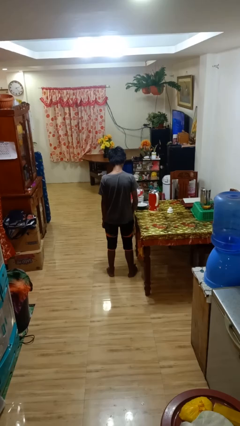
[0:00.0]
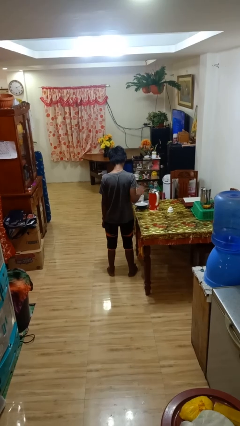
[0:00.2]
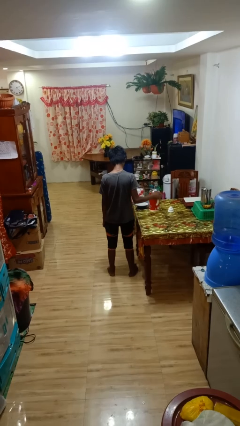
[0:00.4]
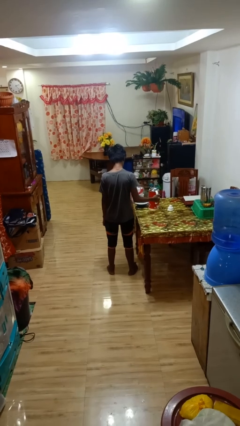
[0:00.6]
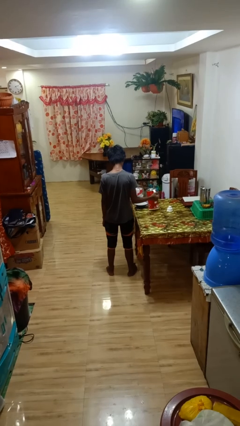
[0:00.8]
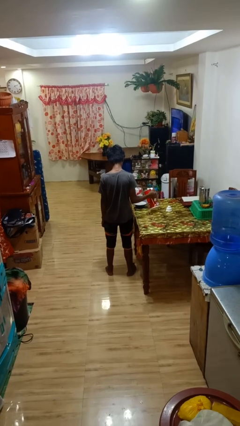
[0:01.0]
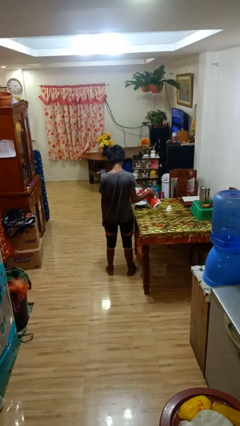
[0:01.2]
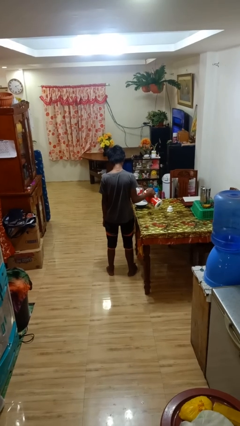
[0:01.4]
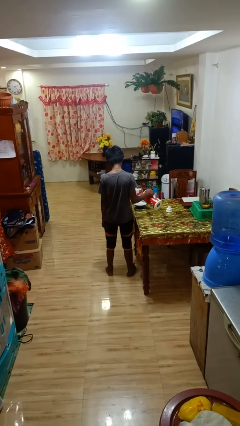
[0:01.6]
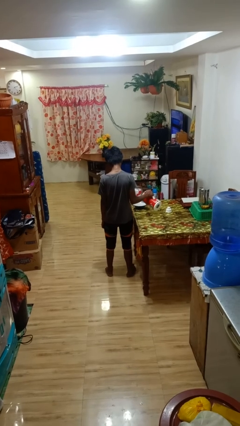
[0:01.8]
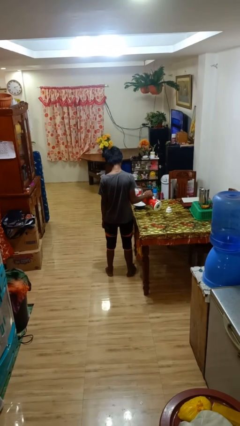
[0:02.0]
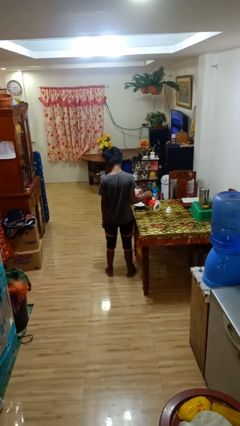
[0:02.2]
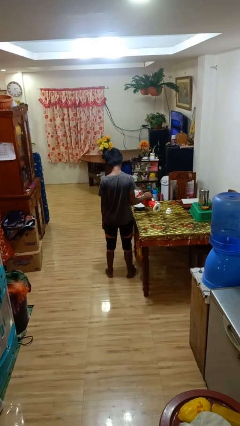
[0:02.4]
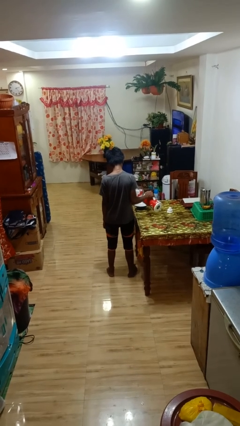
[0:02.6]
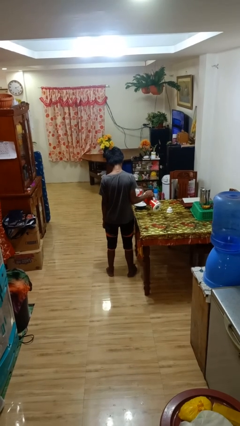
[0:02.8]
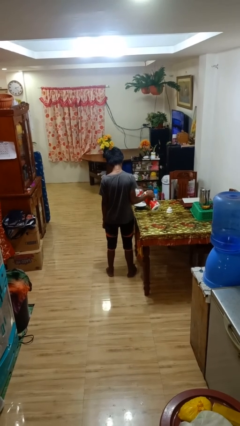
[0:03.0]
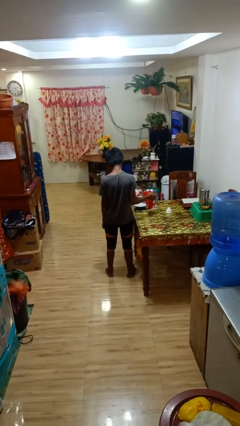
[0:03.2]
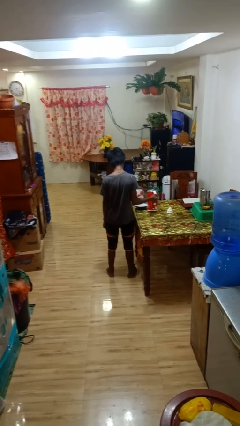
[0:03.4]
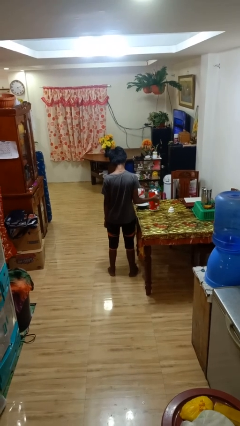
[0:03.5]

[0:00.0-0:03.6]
person pours into bowl

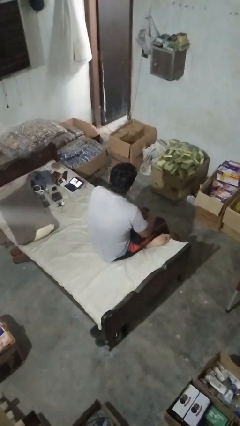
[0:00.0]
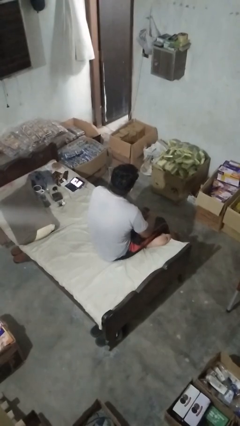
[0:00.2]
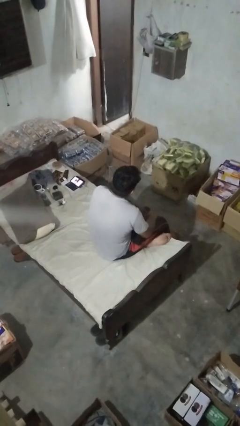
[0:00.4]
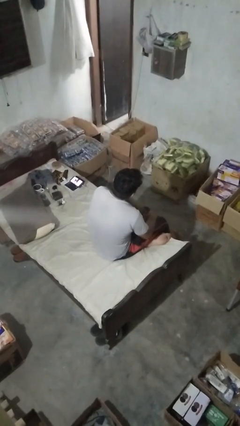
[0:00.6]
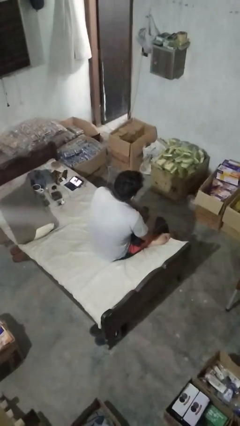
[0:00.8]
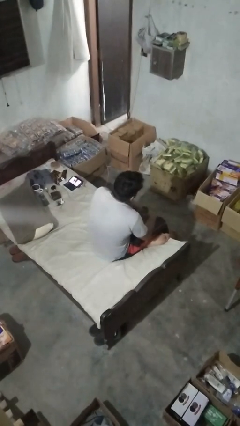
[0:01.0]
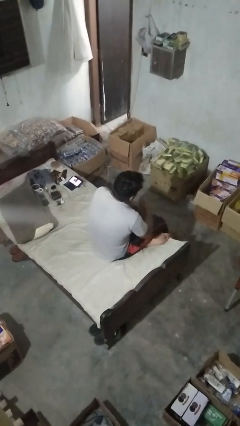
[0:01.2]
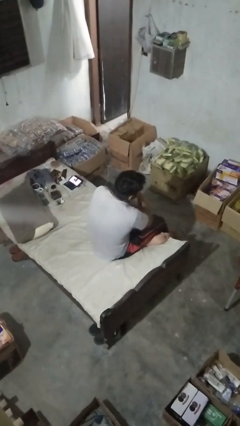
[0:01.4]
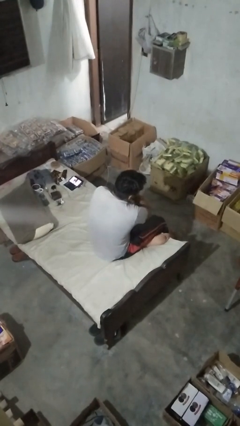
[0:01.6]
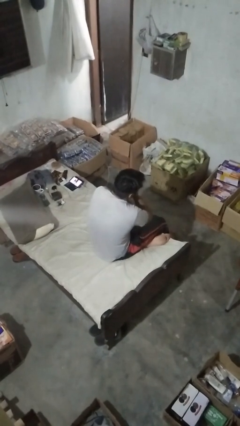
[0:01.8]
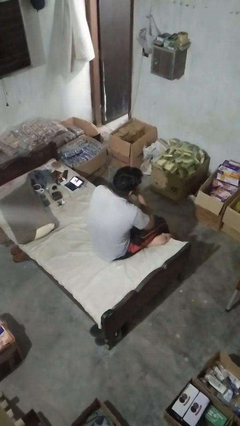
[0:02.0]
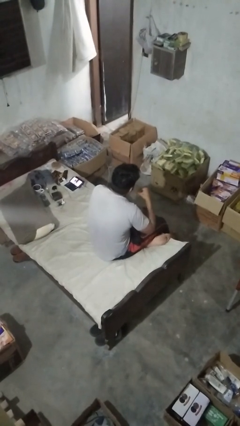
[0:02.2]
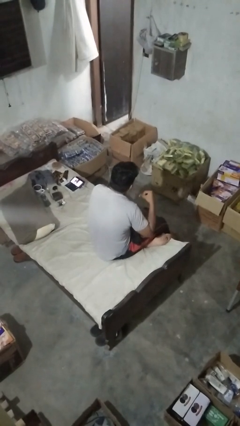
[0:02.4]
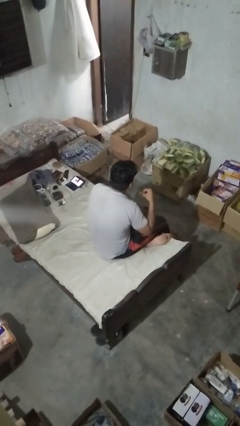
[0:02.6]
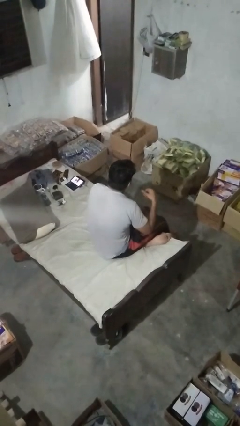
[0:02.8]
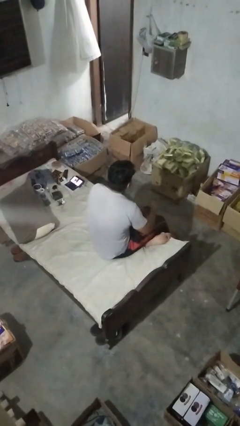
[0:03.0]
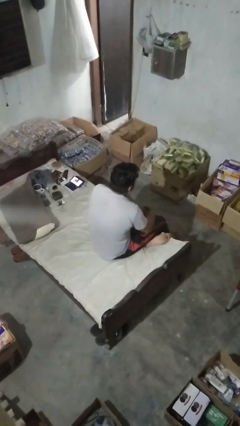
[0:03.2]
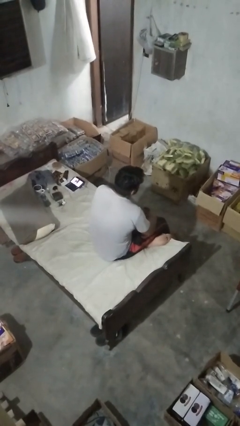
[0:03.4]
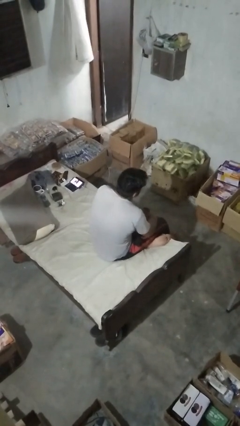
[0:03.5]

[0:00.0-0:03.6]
person gestures cut

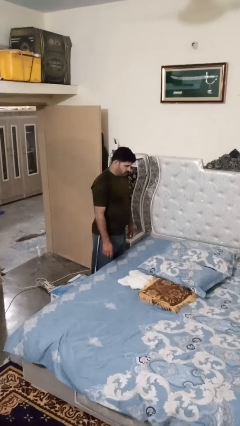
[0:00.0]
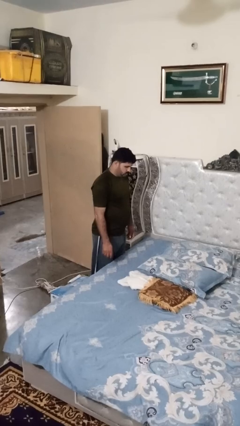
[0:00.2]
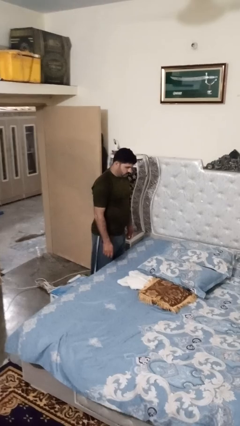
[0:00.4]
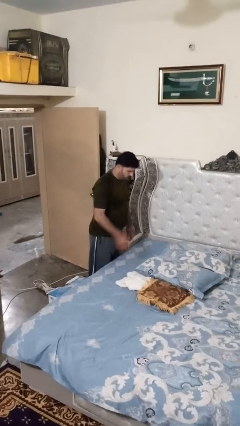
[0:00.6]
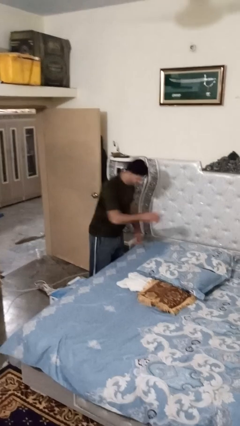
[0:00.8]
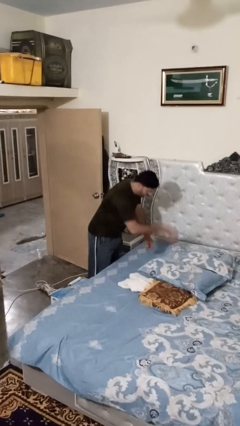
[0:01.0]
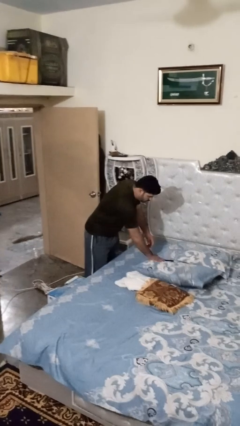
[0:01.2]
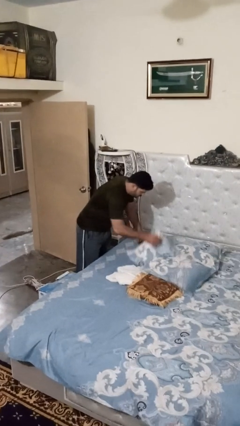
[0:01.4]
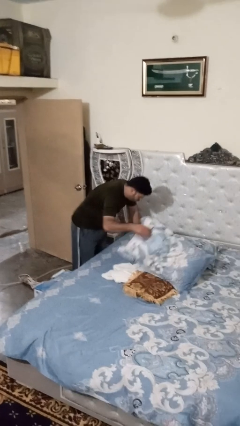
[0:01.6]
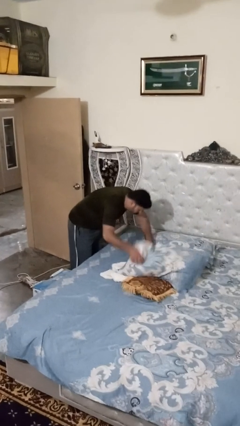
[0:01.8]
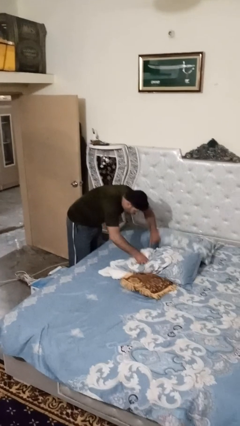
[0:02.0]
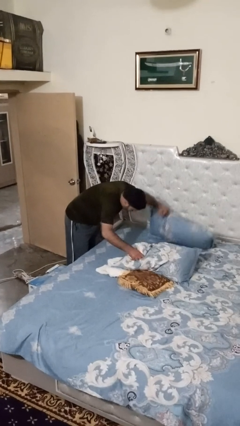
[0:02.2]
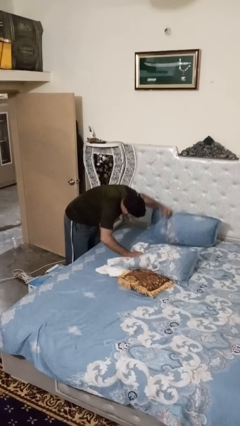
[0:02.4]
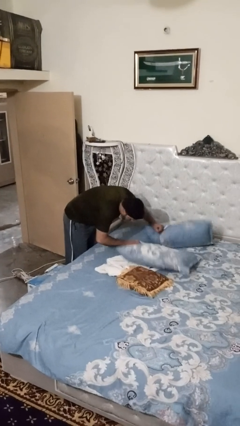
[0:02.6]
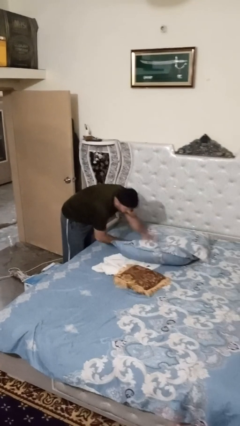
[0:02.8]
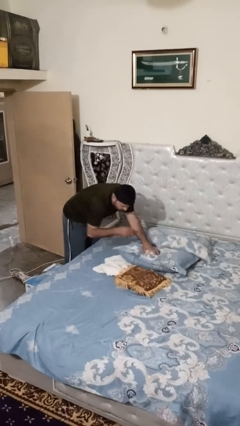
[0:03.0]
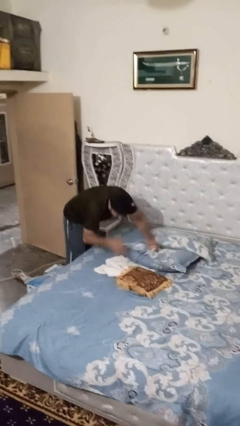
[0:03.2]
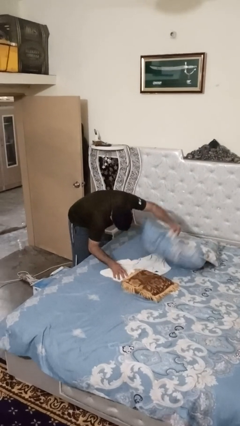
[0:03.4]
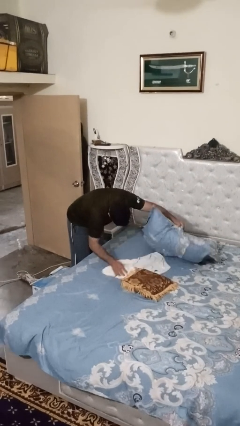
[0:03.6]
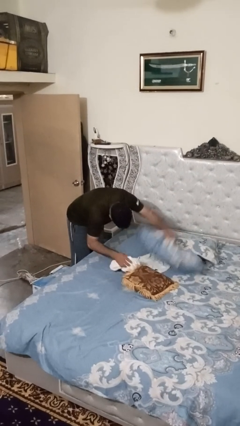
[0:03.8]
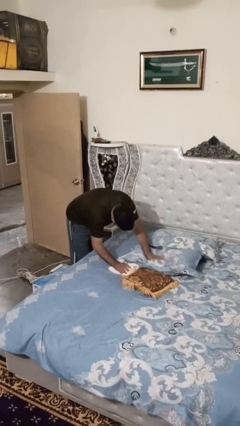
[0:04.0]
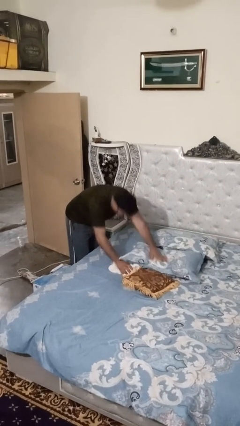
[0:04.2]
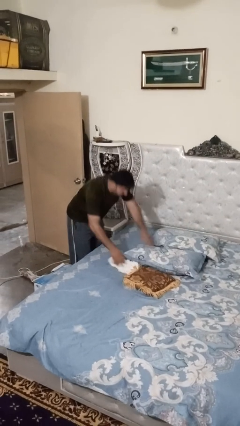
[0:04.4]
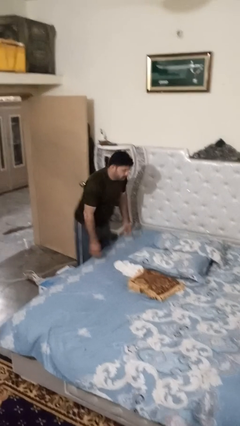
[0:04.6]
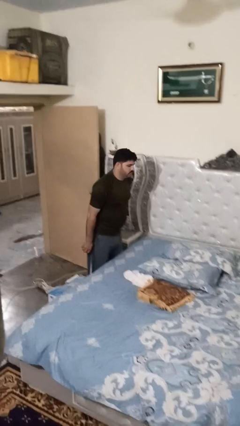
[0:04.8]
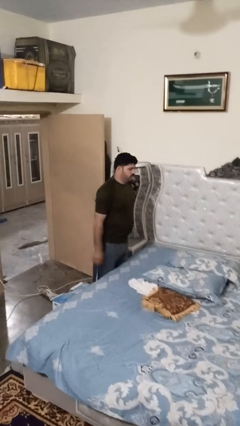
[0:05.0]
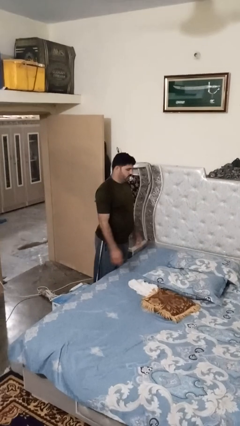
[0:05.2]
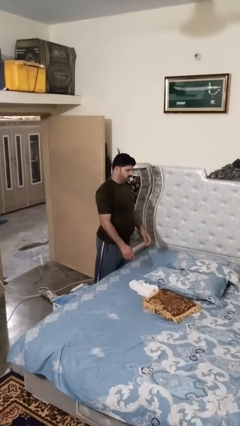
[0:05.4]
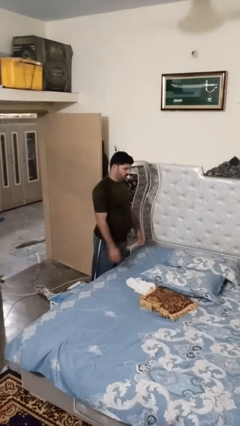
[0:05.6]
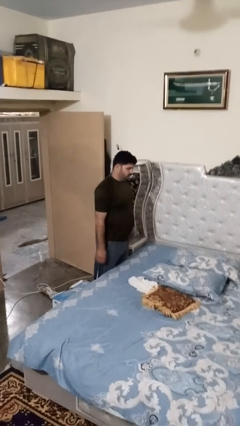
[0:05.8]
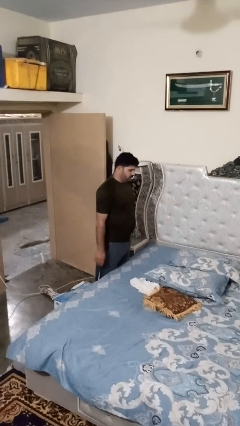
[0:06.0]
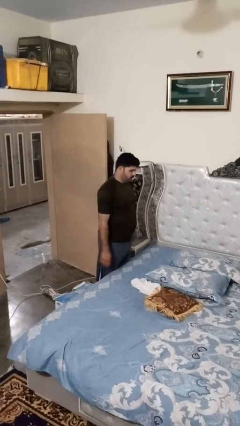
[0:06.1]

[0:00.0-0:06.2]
person searches under bed

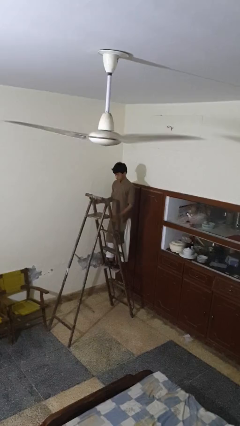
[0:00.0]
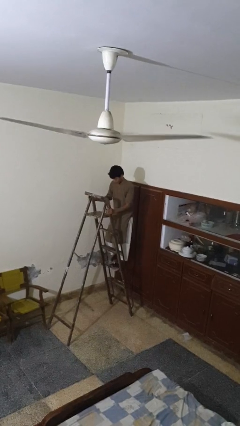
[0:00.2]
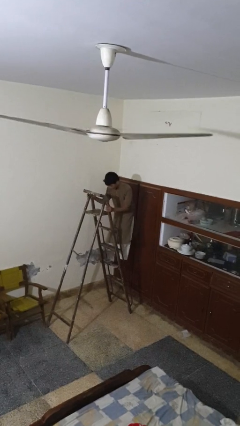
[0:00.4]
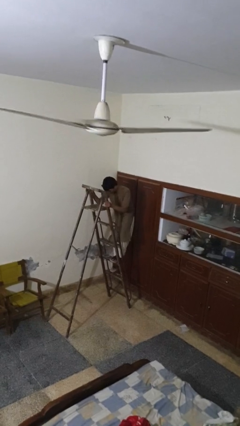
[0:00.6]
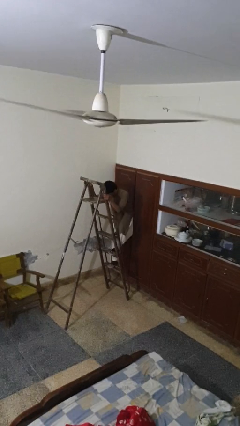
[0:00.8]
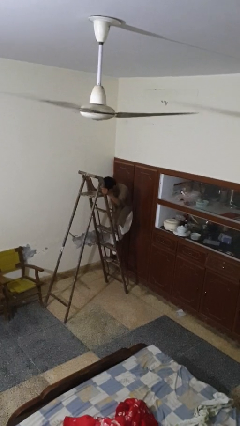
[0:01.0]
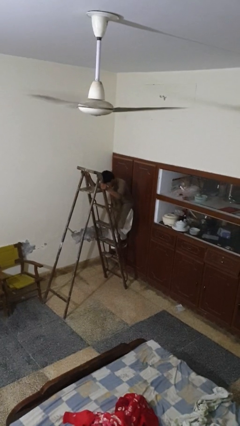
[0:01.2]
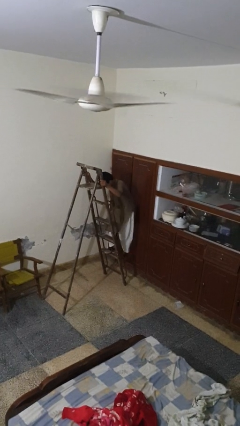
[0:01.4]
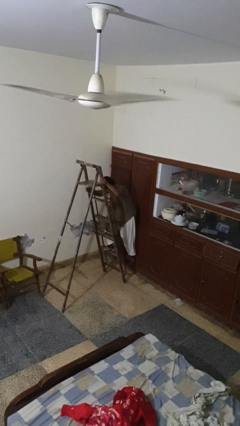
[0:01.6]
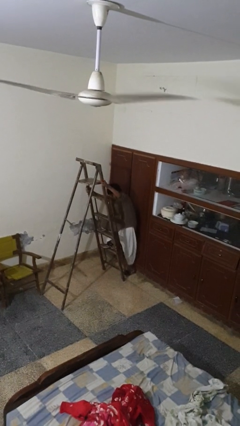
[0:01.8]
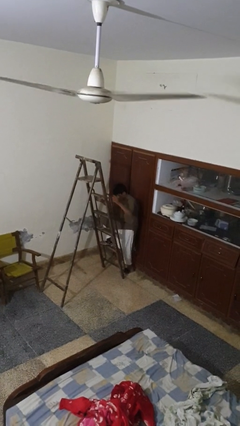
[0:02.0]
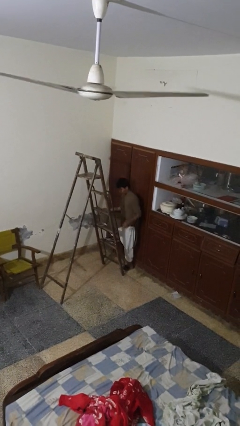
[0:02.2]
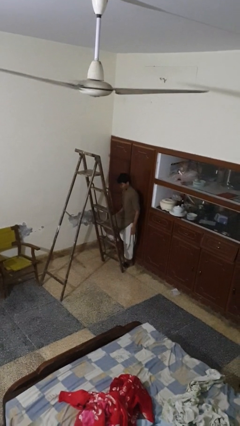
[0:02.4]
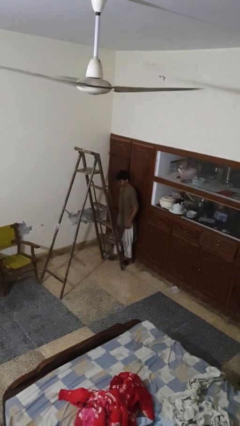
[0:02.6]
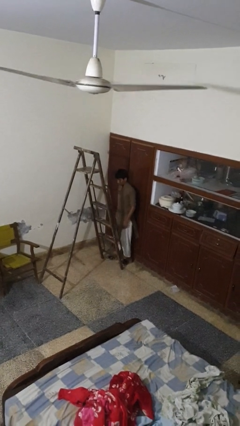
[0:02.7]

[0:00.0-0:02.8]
person climbs down ladder

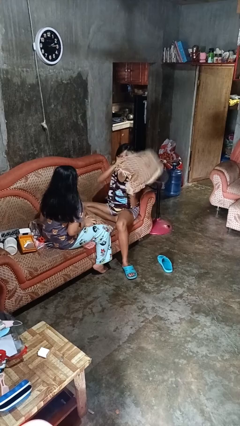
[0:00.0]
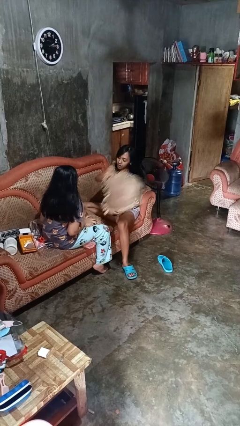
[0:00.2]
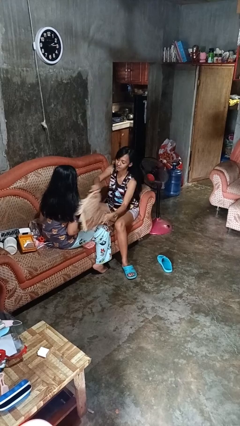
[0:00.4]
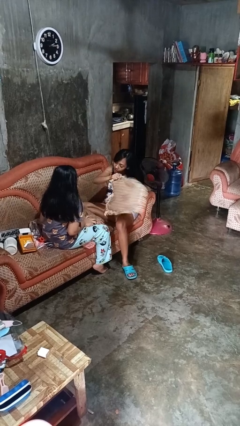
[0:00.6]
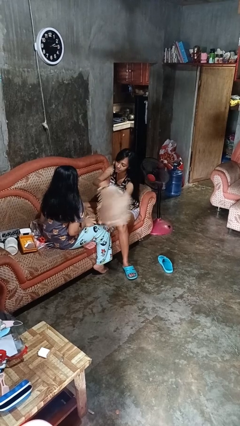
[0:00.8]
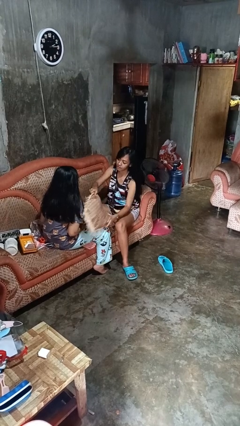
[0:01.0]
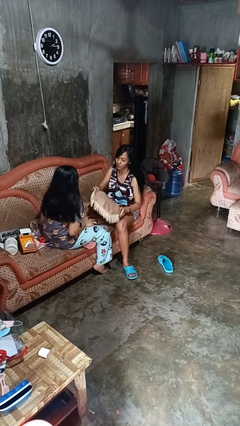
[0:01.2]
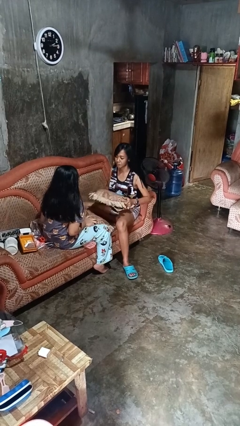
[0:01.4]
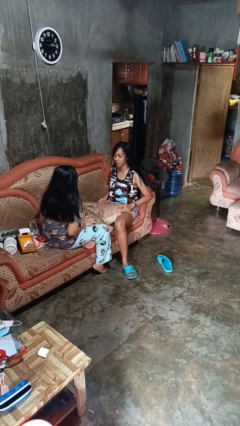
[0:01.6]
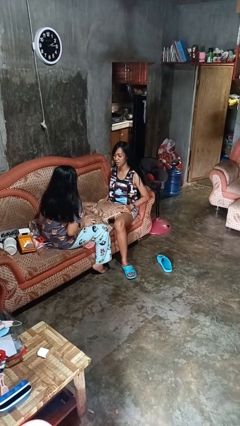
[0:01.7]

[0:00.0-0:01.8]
person hits person with pillow
